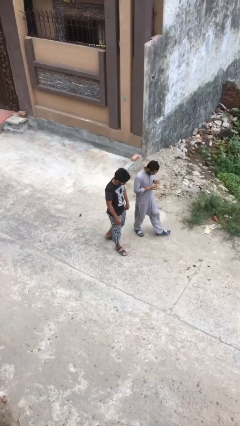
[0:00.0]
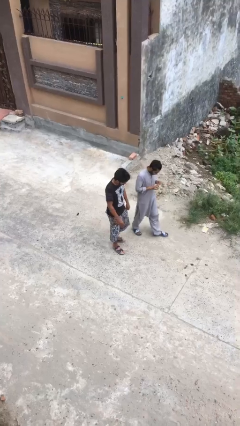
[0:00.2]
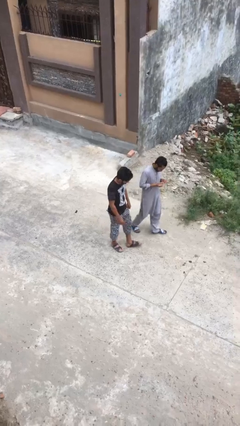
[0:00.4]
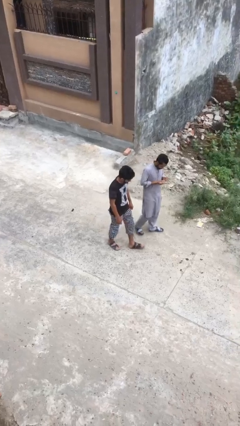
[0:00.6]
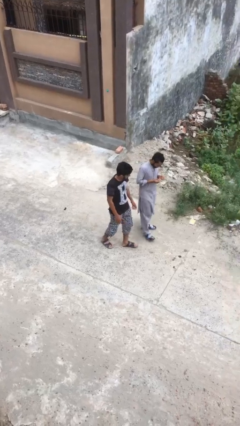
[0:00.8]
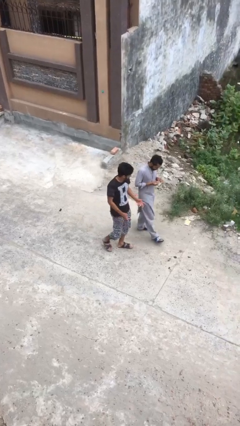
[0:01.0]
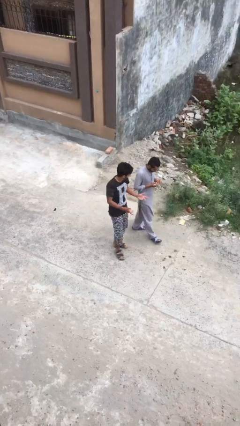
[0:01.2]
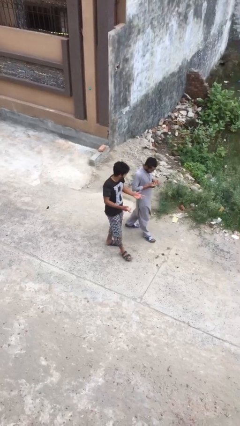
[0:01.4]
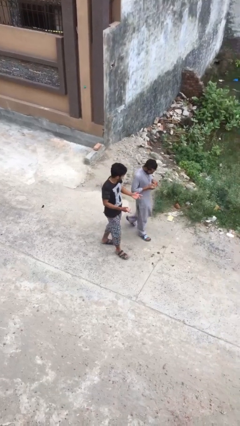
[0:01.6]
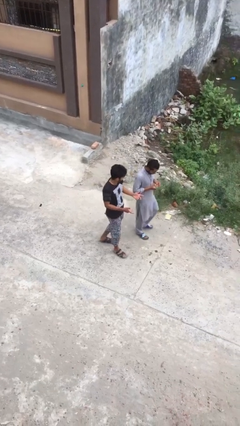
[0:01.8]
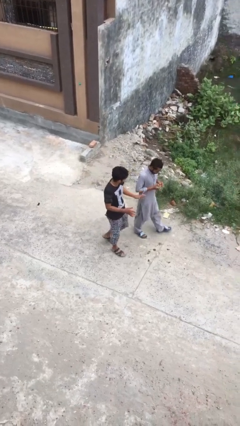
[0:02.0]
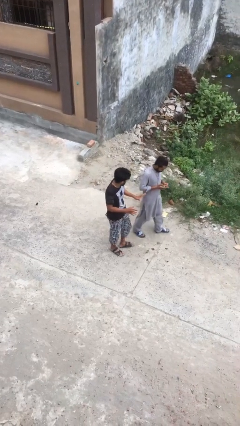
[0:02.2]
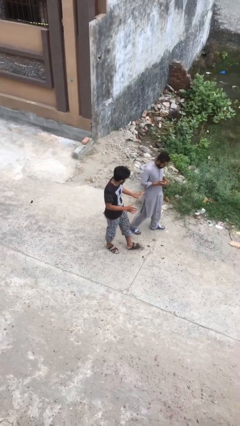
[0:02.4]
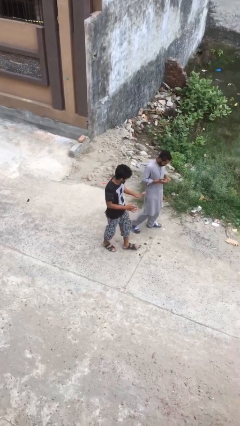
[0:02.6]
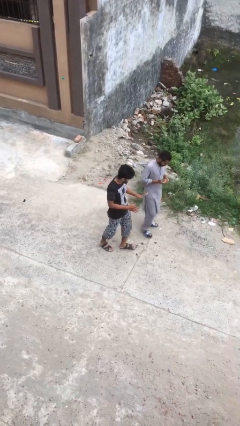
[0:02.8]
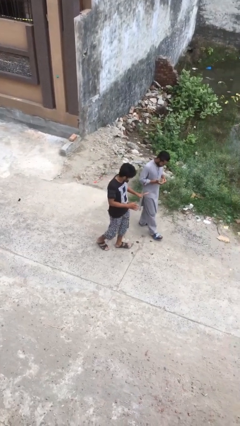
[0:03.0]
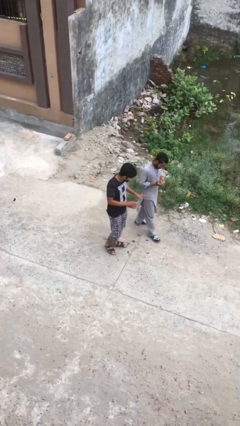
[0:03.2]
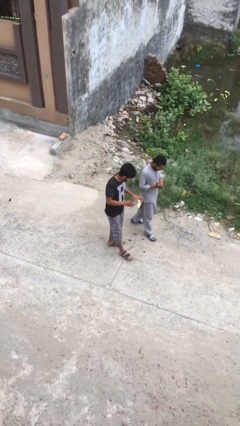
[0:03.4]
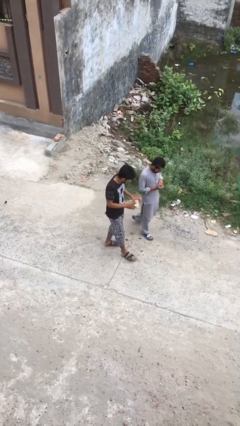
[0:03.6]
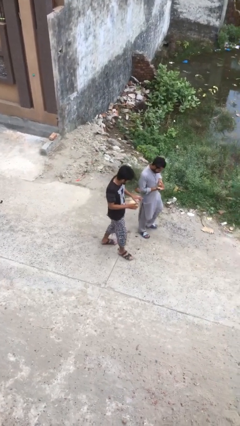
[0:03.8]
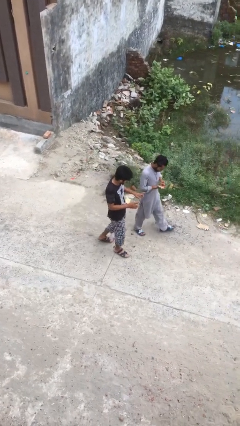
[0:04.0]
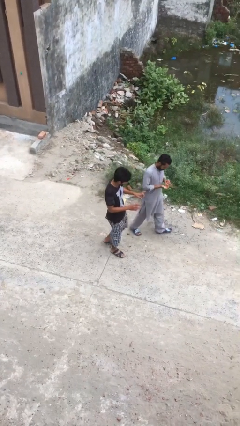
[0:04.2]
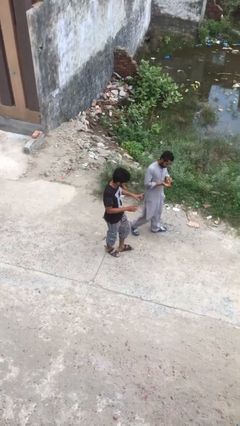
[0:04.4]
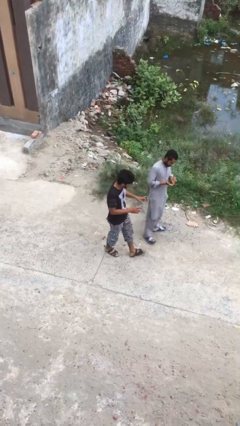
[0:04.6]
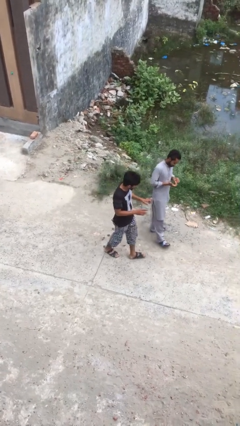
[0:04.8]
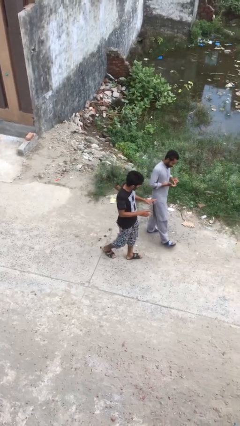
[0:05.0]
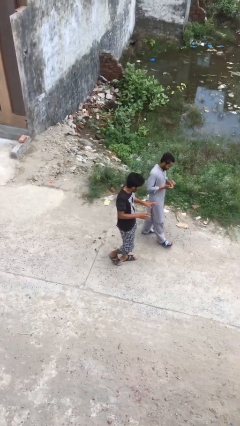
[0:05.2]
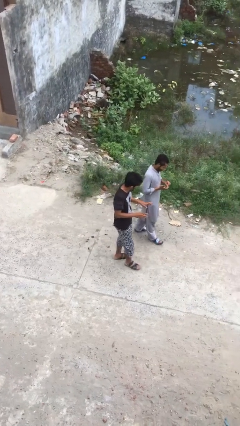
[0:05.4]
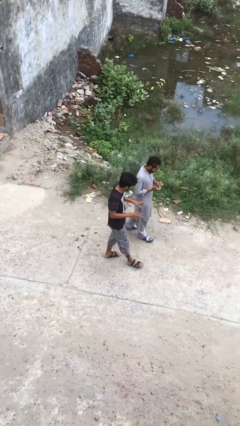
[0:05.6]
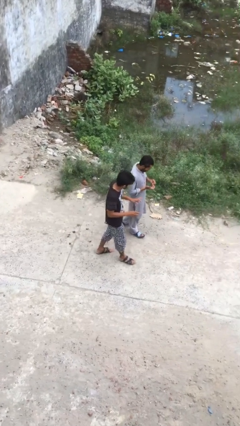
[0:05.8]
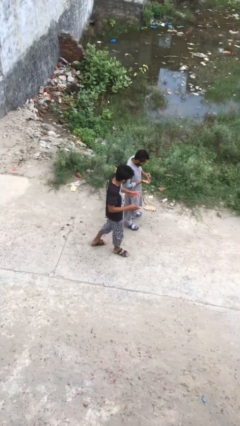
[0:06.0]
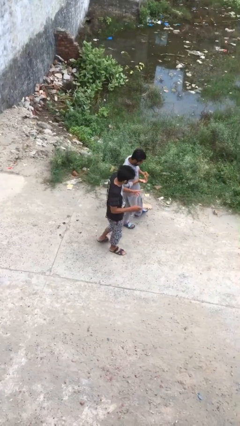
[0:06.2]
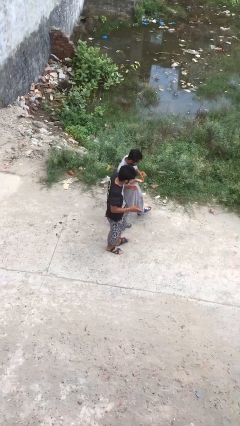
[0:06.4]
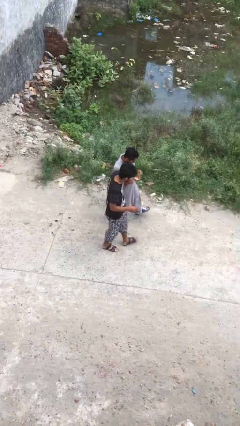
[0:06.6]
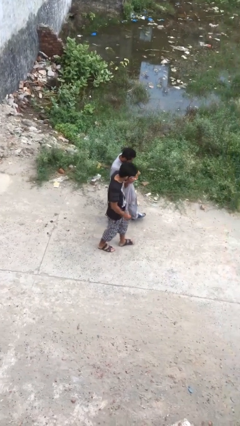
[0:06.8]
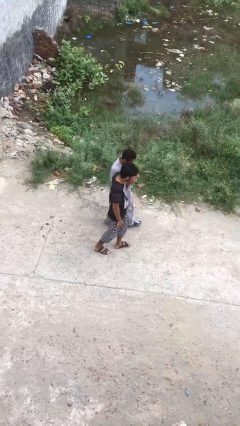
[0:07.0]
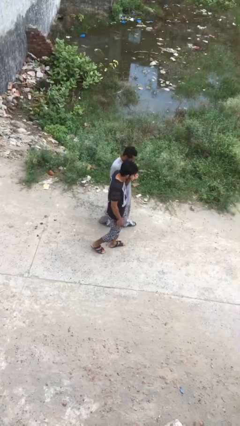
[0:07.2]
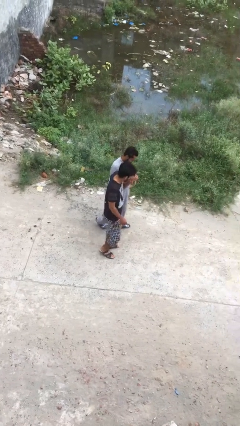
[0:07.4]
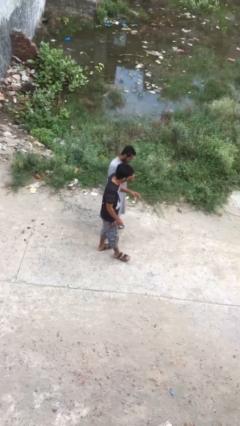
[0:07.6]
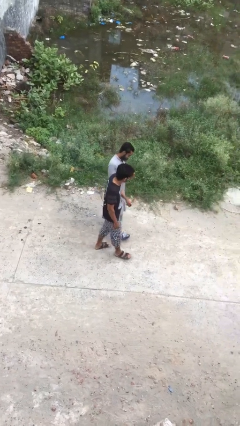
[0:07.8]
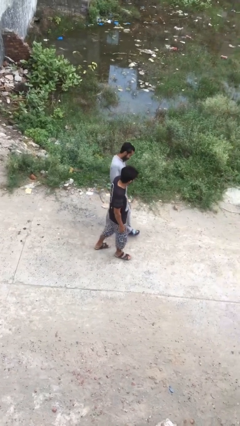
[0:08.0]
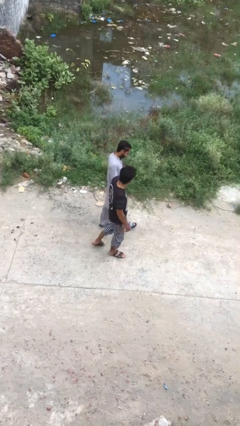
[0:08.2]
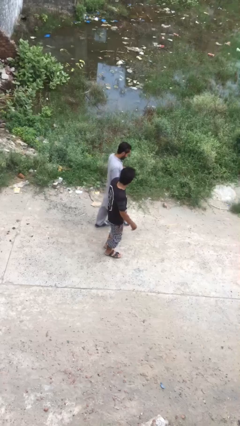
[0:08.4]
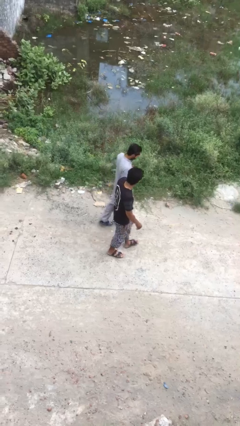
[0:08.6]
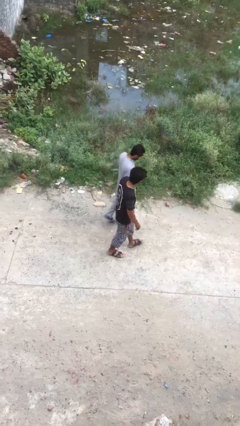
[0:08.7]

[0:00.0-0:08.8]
person talks to person

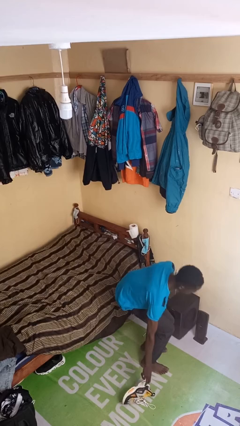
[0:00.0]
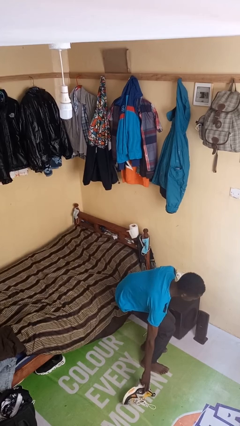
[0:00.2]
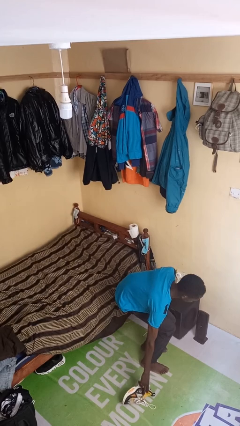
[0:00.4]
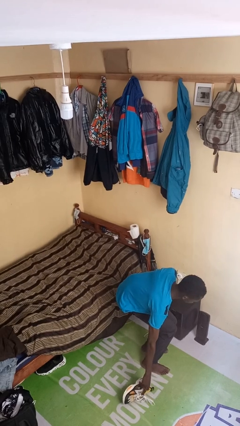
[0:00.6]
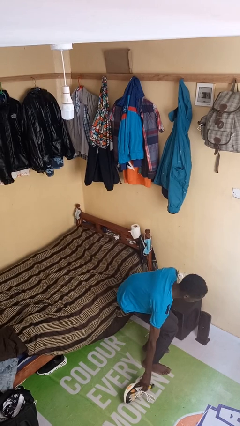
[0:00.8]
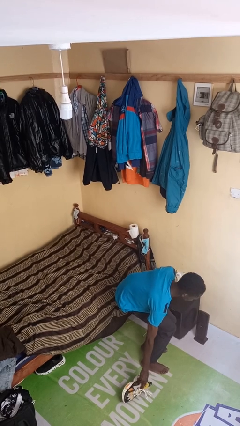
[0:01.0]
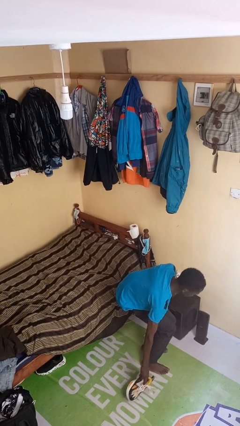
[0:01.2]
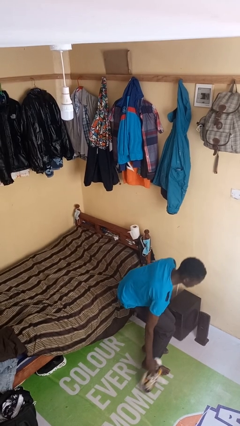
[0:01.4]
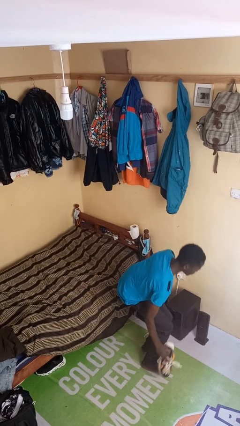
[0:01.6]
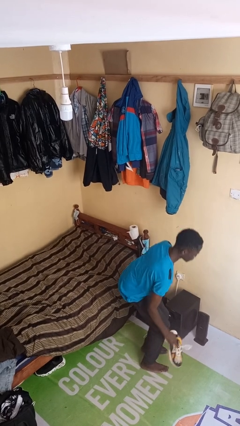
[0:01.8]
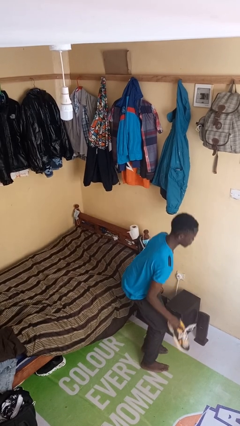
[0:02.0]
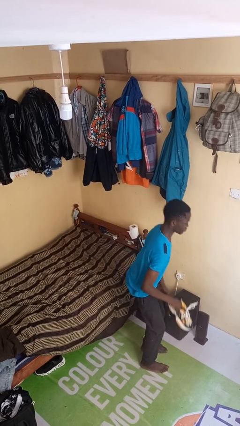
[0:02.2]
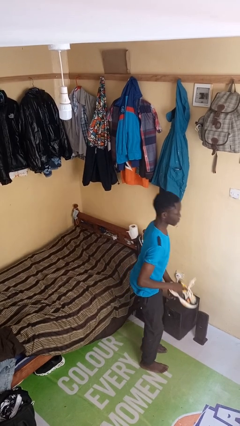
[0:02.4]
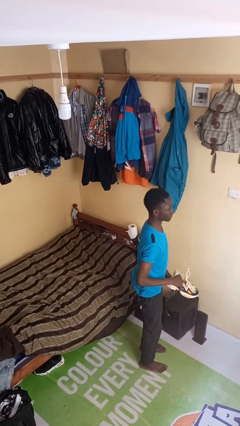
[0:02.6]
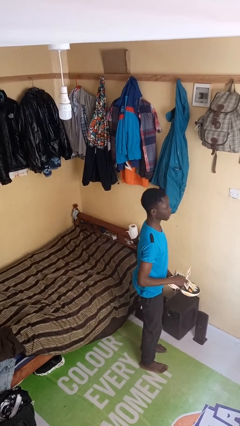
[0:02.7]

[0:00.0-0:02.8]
person picks up object from floor

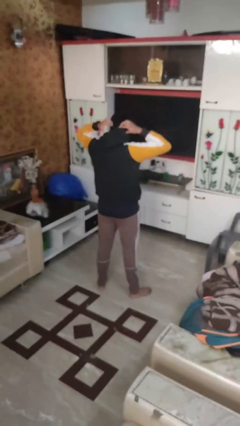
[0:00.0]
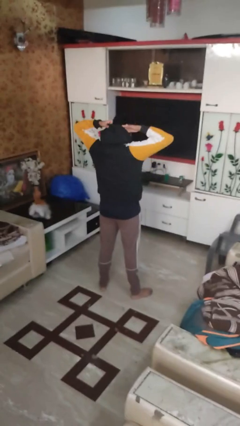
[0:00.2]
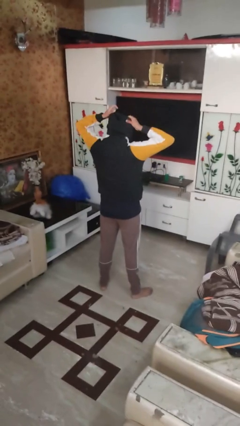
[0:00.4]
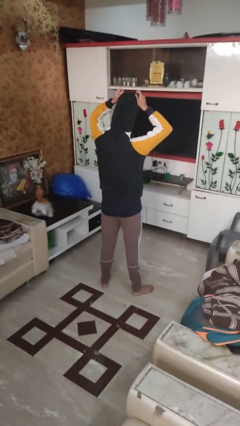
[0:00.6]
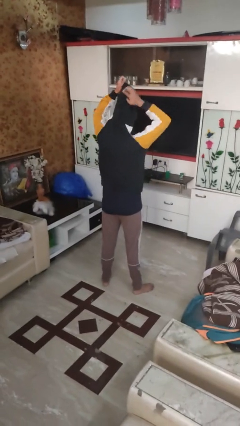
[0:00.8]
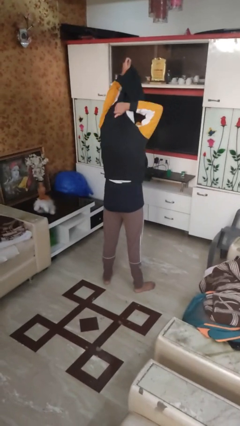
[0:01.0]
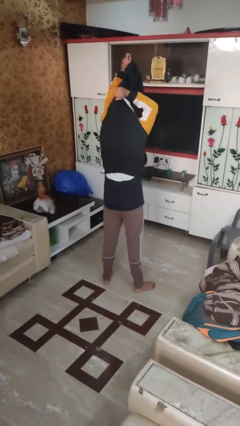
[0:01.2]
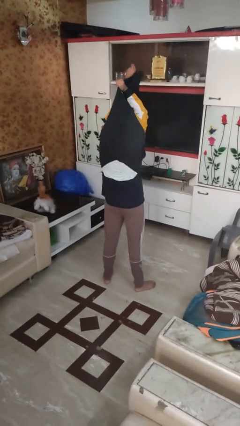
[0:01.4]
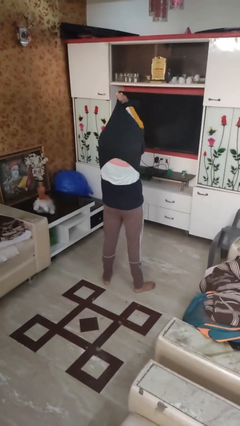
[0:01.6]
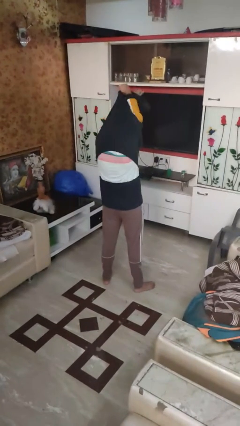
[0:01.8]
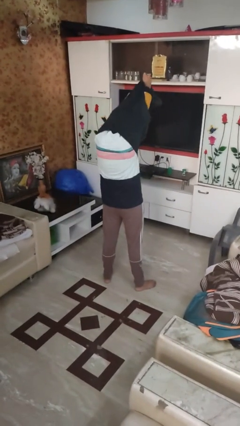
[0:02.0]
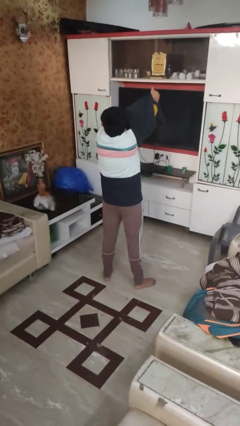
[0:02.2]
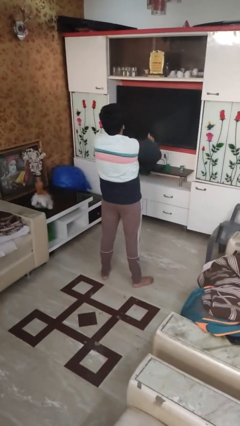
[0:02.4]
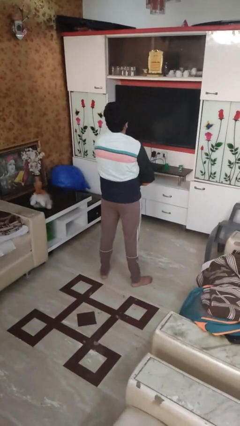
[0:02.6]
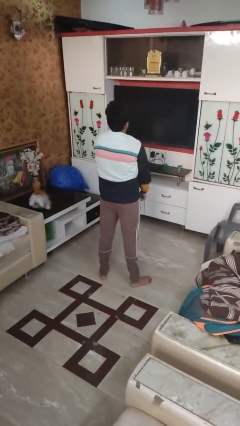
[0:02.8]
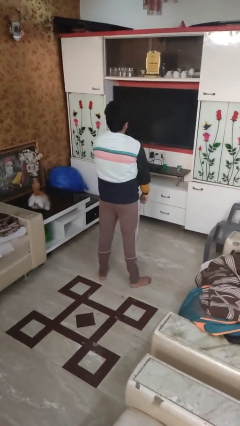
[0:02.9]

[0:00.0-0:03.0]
person takes off hoodie

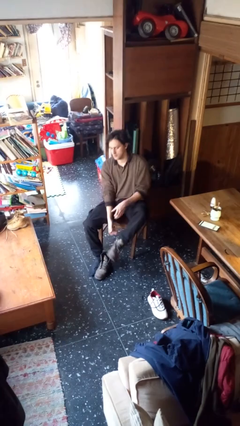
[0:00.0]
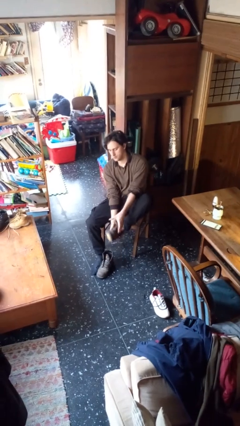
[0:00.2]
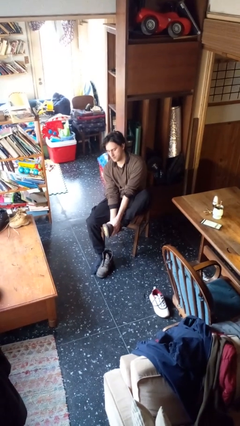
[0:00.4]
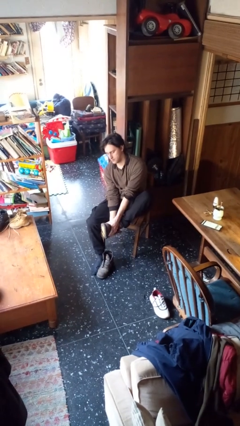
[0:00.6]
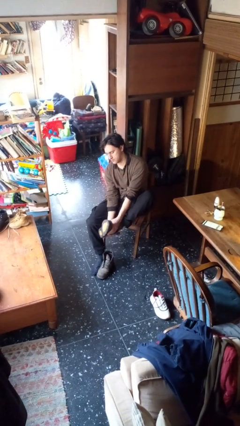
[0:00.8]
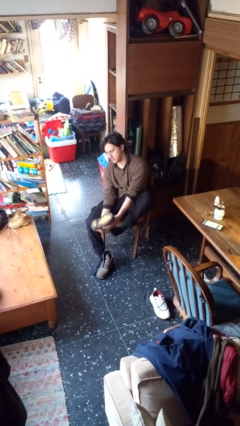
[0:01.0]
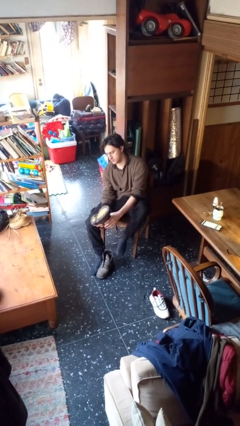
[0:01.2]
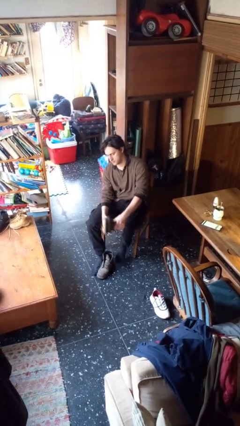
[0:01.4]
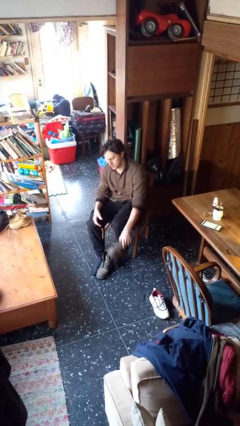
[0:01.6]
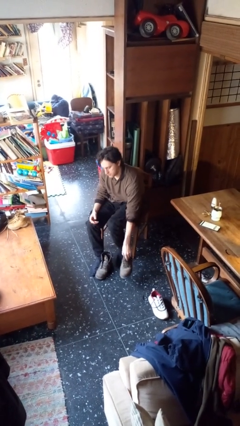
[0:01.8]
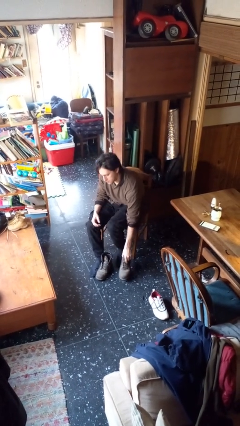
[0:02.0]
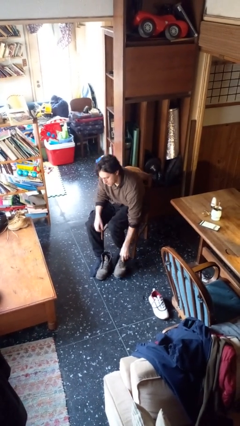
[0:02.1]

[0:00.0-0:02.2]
person takes off boots

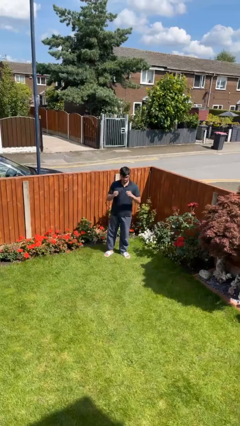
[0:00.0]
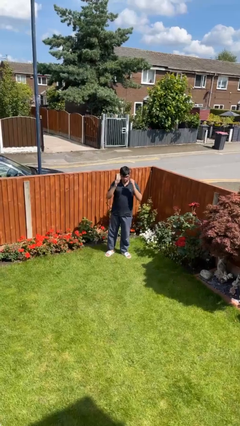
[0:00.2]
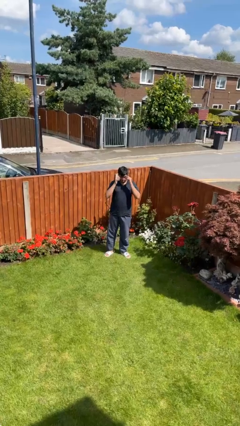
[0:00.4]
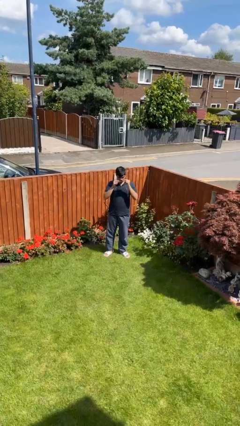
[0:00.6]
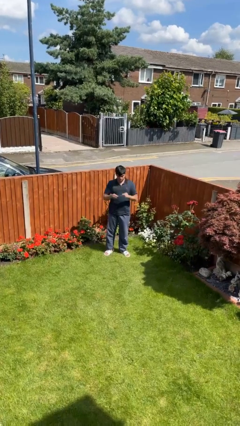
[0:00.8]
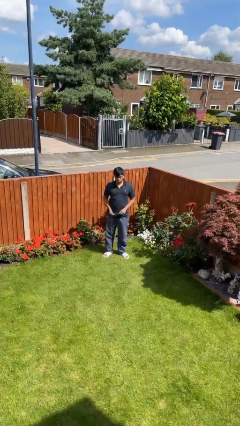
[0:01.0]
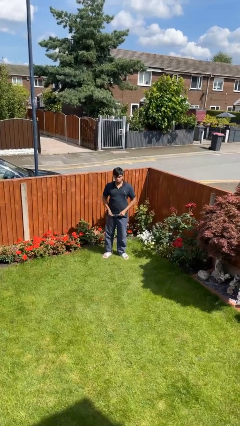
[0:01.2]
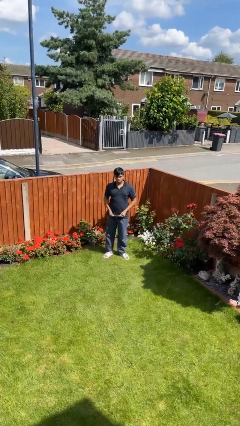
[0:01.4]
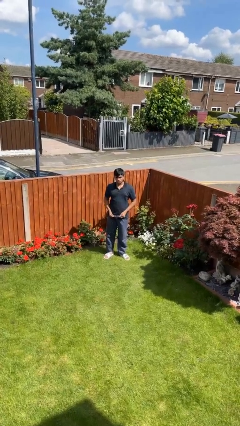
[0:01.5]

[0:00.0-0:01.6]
person takes off glasses
